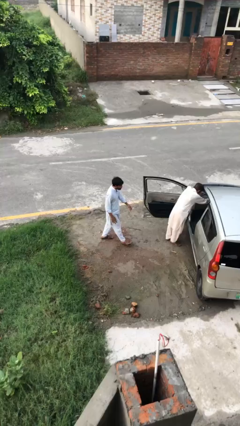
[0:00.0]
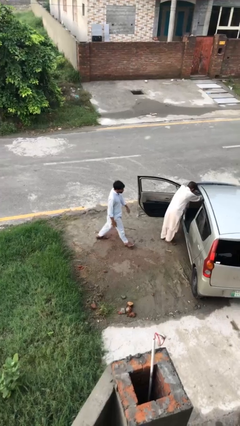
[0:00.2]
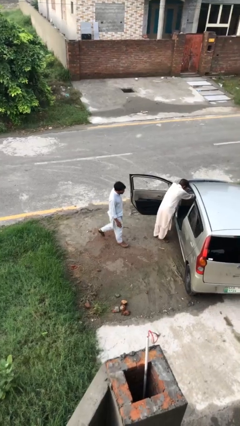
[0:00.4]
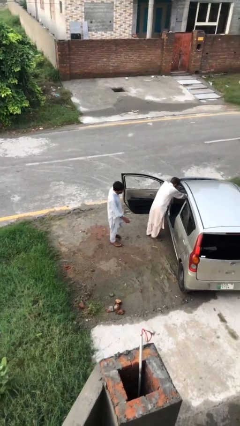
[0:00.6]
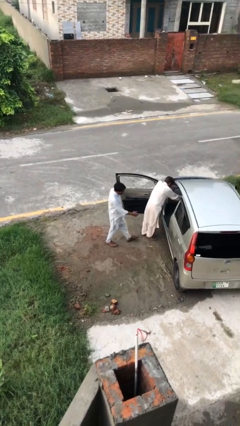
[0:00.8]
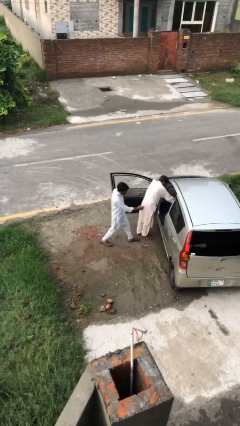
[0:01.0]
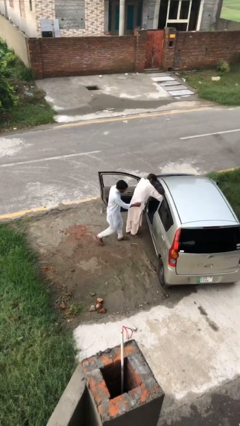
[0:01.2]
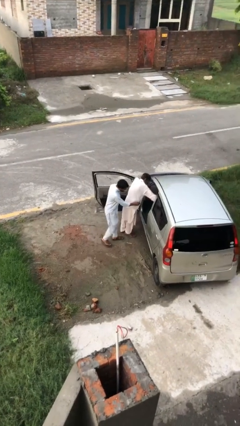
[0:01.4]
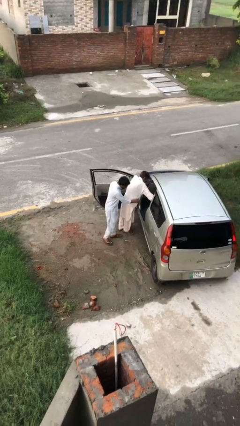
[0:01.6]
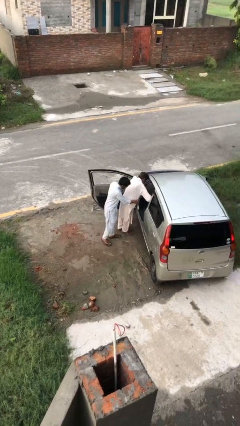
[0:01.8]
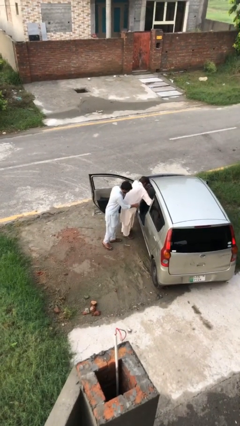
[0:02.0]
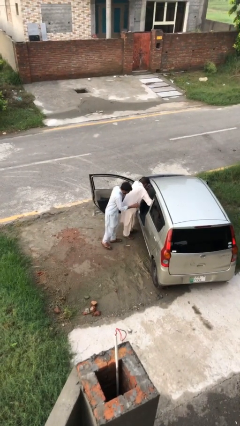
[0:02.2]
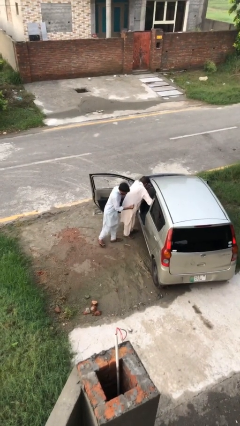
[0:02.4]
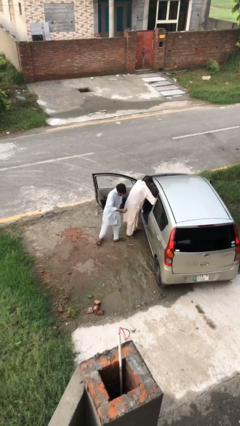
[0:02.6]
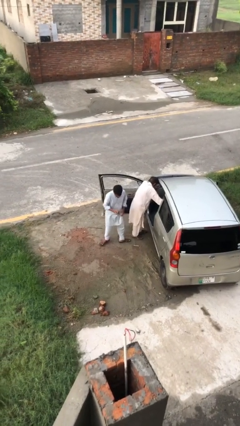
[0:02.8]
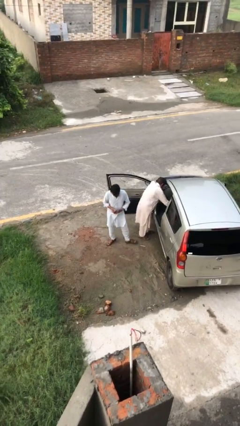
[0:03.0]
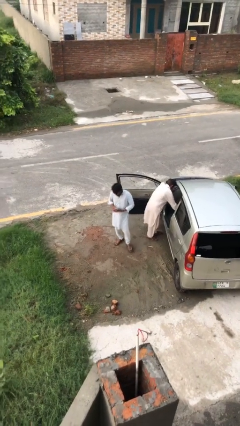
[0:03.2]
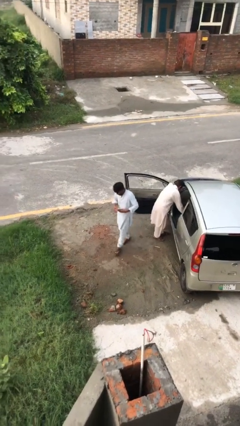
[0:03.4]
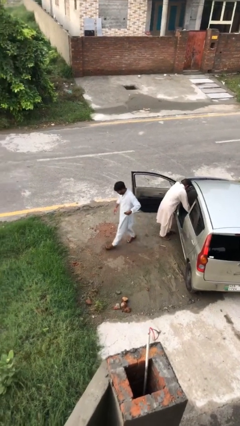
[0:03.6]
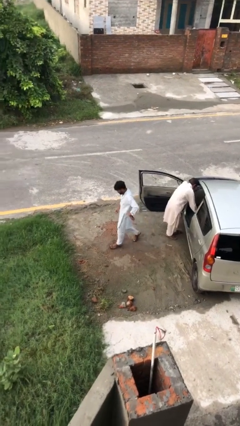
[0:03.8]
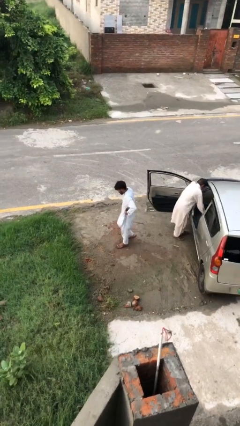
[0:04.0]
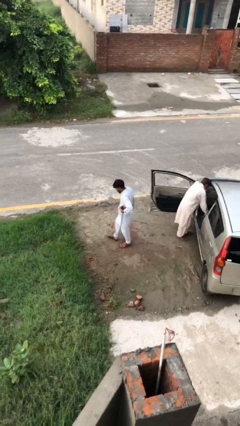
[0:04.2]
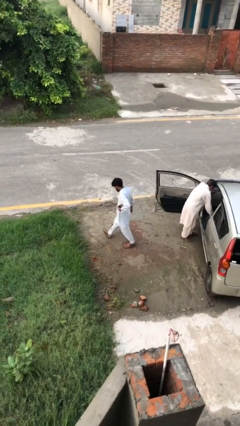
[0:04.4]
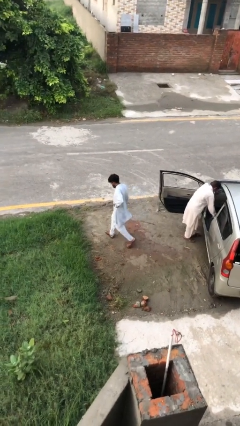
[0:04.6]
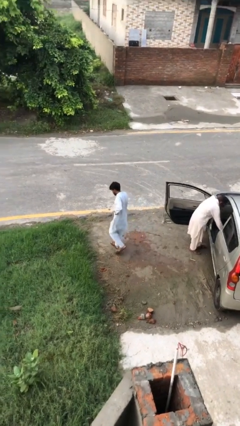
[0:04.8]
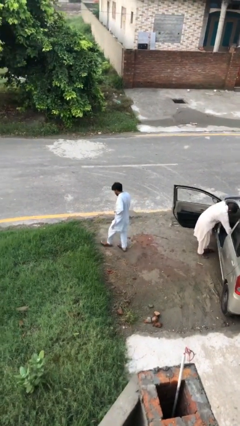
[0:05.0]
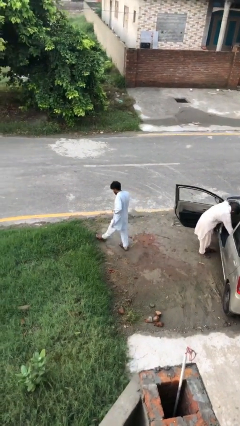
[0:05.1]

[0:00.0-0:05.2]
person steals object from person

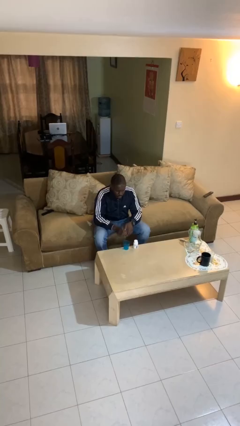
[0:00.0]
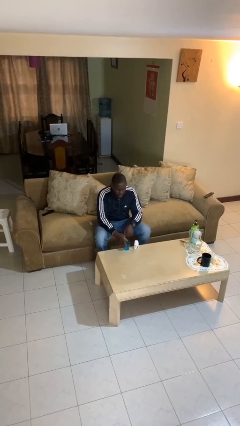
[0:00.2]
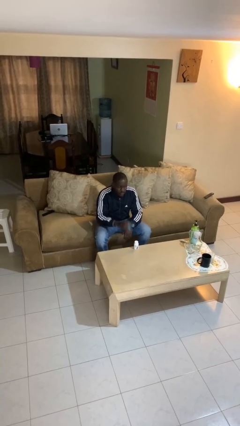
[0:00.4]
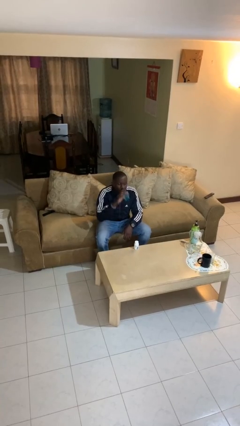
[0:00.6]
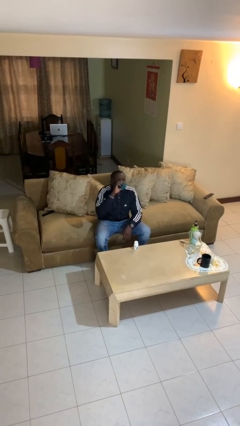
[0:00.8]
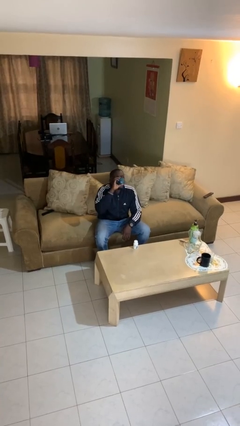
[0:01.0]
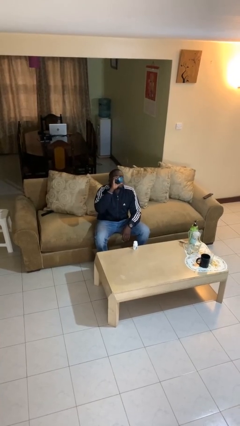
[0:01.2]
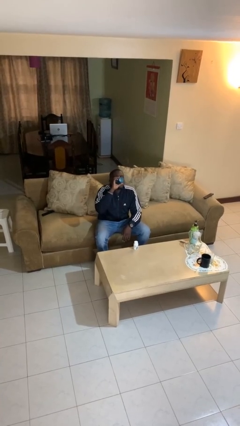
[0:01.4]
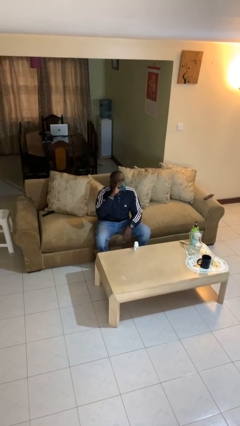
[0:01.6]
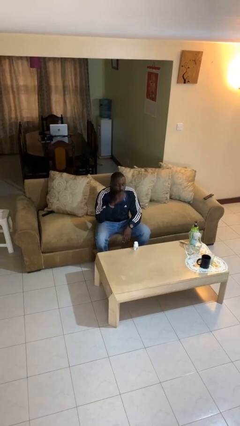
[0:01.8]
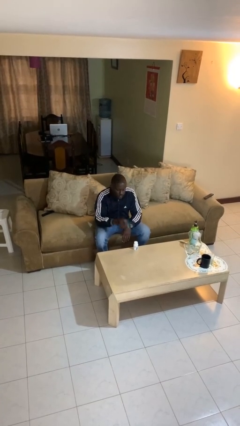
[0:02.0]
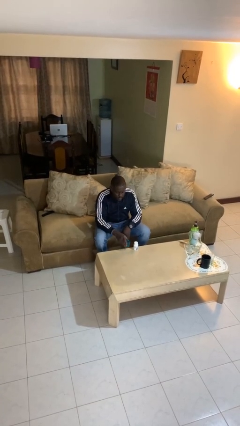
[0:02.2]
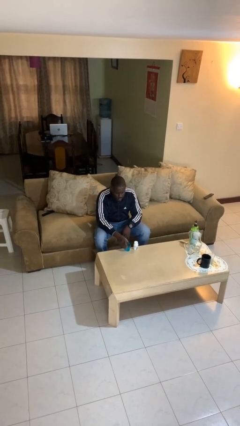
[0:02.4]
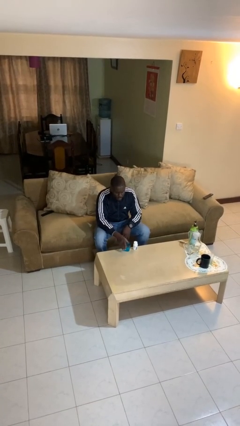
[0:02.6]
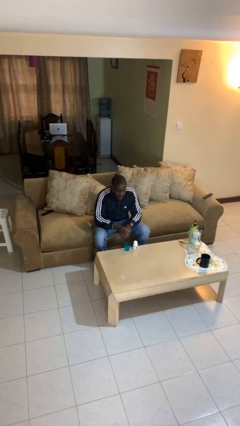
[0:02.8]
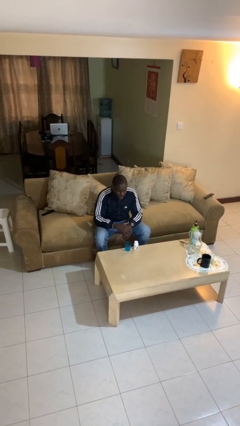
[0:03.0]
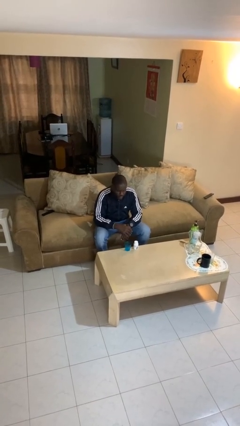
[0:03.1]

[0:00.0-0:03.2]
person drinks from cup

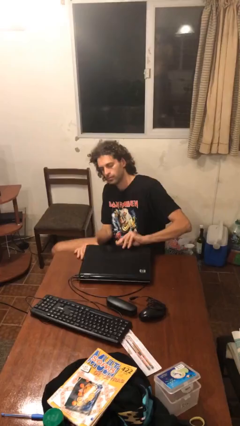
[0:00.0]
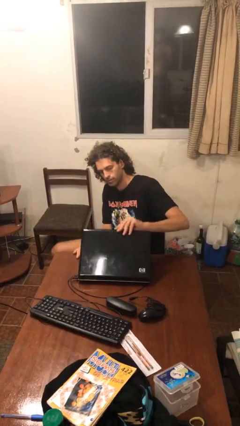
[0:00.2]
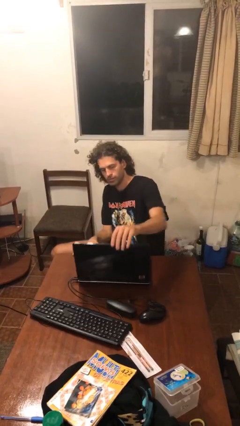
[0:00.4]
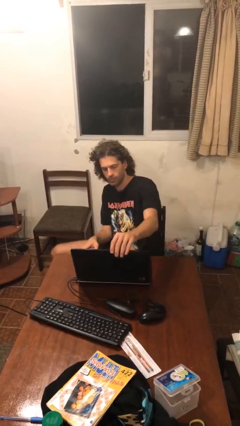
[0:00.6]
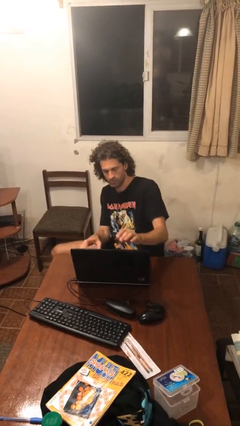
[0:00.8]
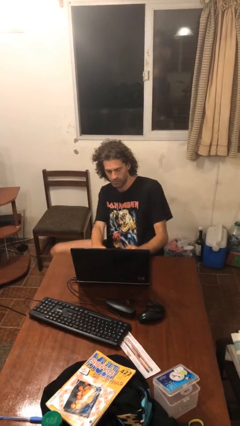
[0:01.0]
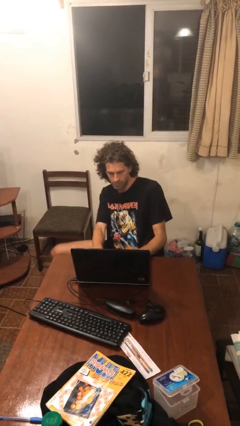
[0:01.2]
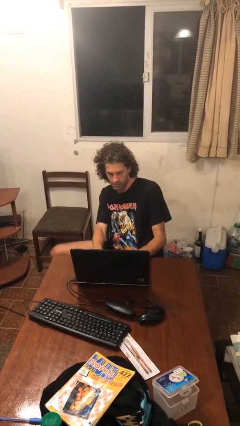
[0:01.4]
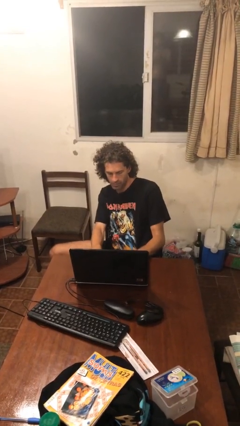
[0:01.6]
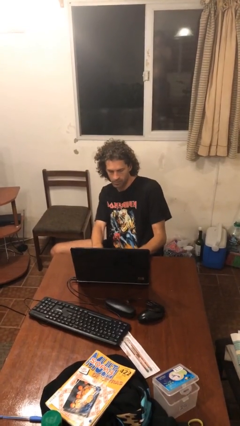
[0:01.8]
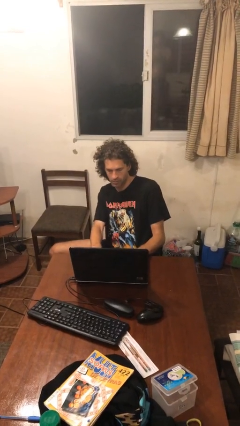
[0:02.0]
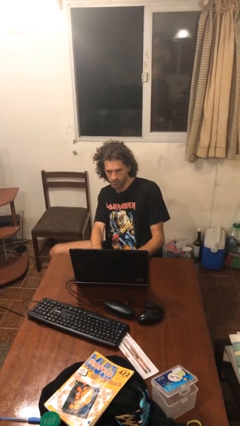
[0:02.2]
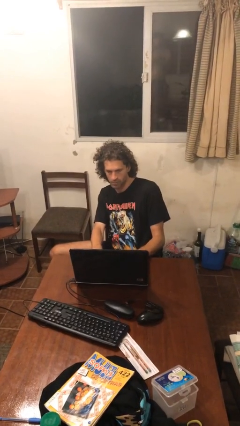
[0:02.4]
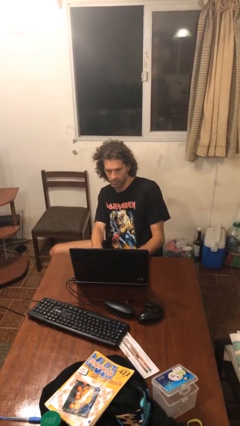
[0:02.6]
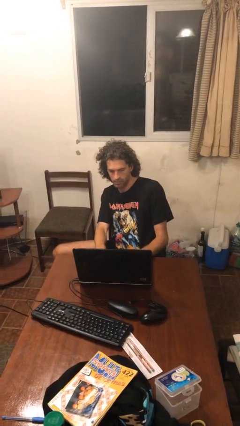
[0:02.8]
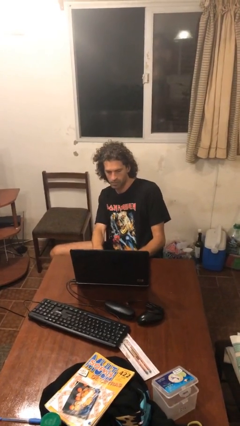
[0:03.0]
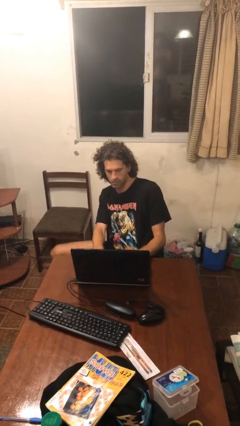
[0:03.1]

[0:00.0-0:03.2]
person interacts with laptop

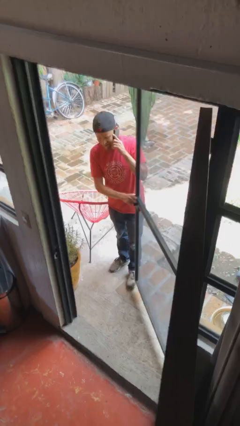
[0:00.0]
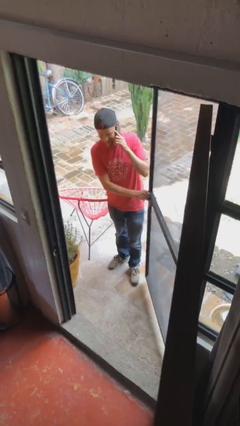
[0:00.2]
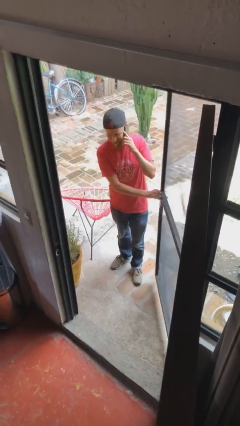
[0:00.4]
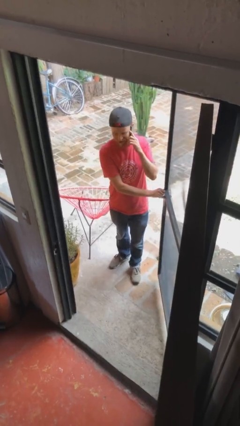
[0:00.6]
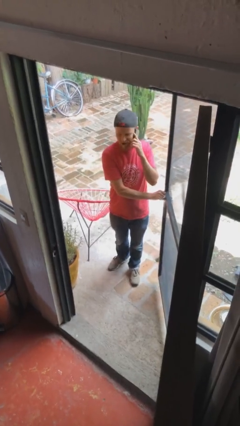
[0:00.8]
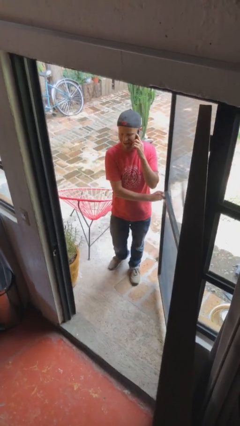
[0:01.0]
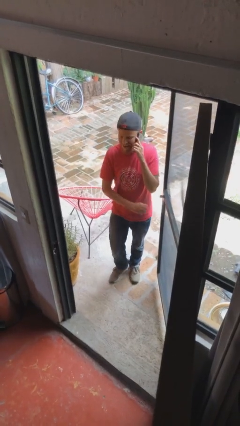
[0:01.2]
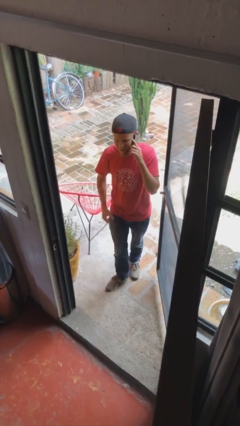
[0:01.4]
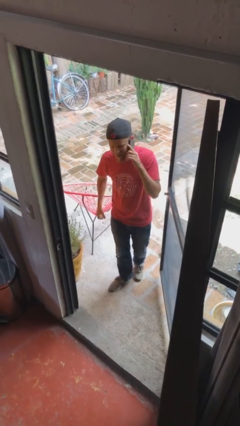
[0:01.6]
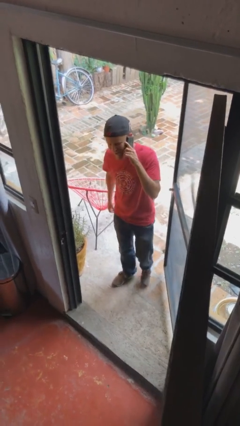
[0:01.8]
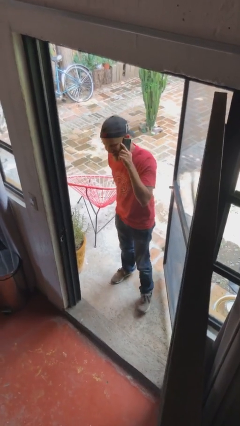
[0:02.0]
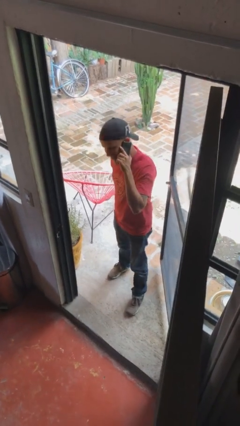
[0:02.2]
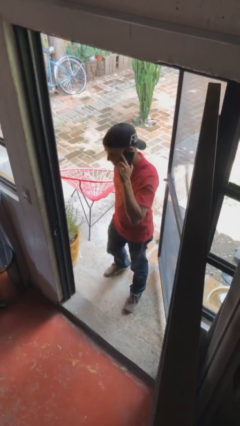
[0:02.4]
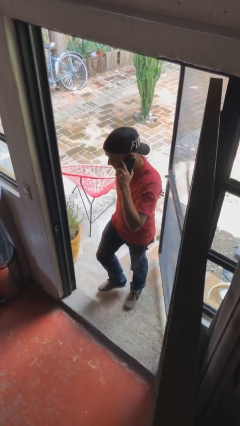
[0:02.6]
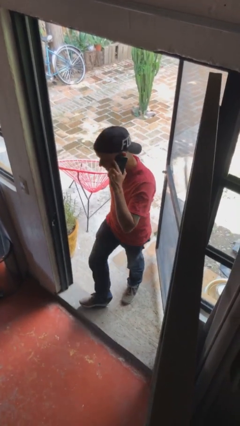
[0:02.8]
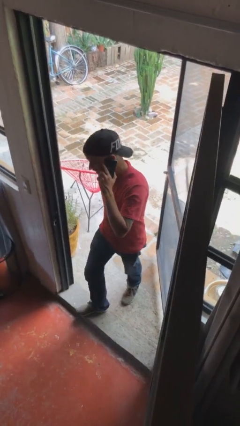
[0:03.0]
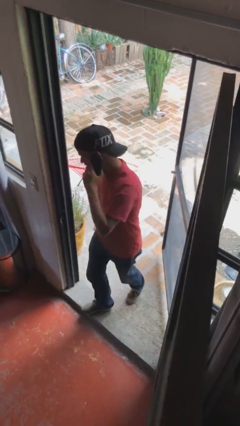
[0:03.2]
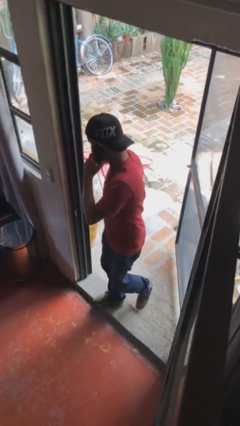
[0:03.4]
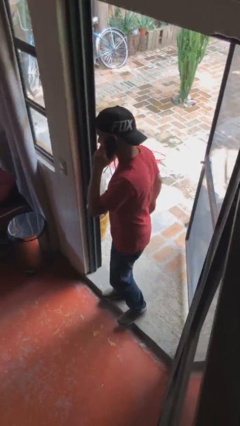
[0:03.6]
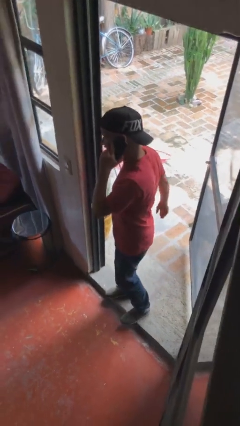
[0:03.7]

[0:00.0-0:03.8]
person enters scene through structure

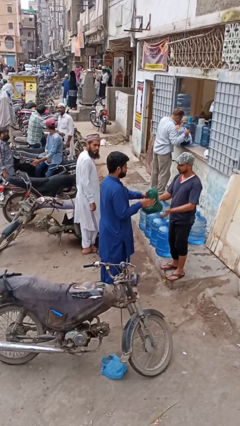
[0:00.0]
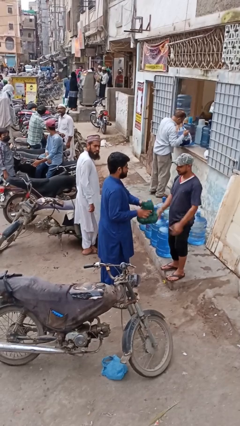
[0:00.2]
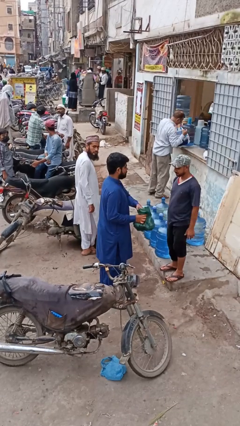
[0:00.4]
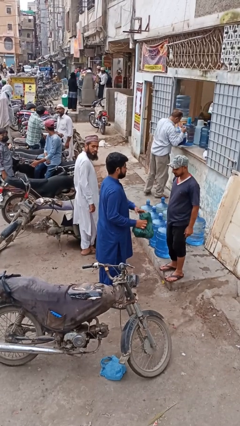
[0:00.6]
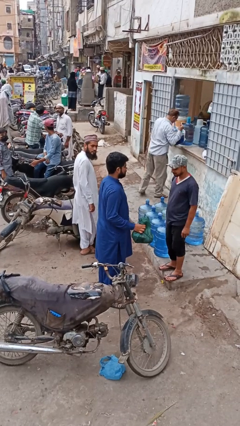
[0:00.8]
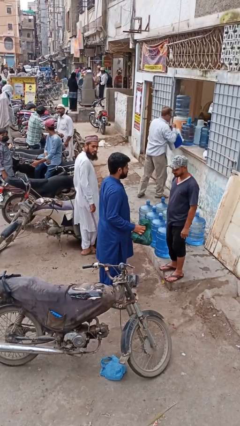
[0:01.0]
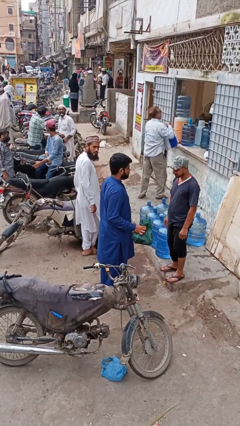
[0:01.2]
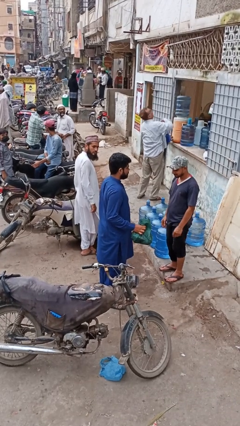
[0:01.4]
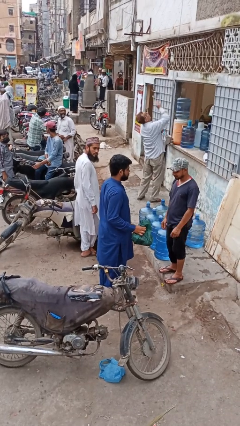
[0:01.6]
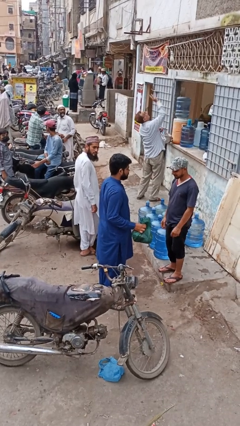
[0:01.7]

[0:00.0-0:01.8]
person transfers object to person

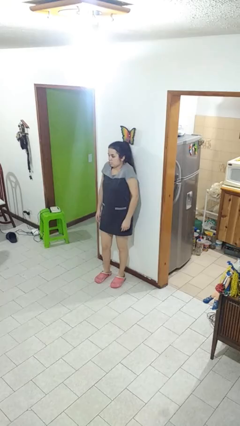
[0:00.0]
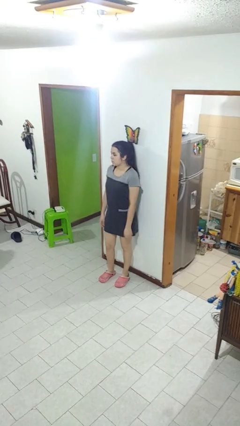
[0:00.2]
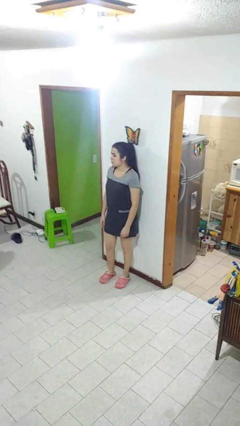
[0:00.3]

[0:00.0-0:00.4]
person shrugs
